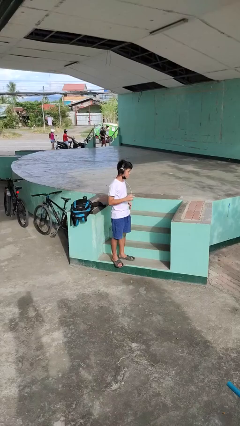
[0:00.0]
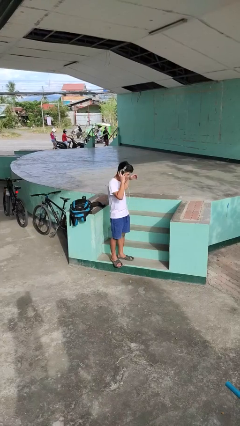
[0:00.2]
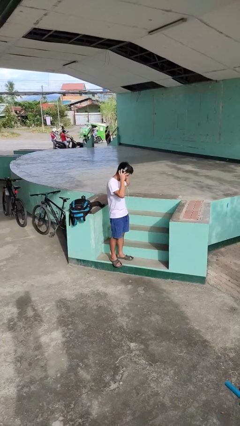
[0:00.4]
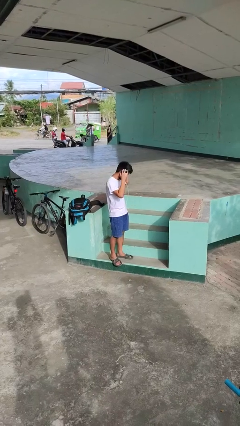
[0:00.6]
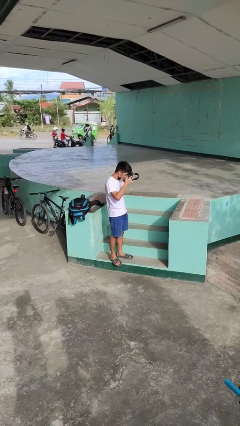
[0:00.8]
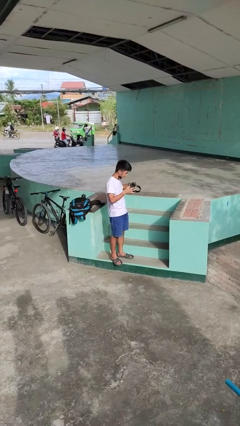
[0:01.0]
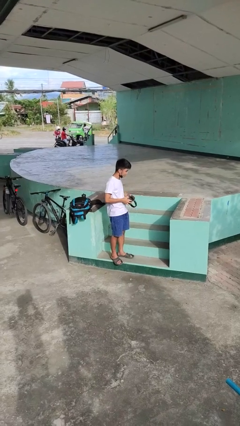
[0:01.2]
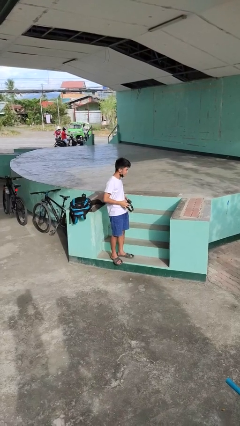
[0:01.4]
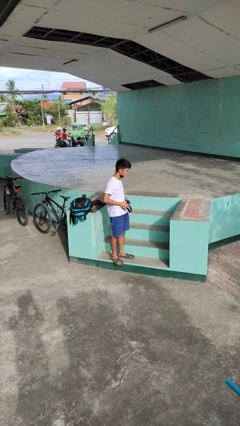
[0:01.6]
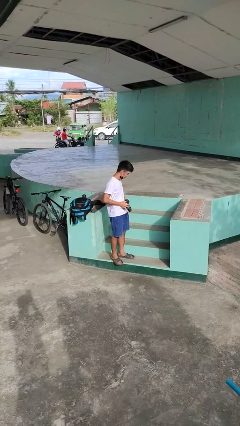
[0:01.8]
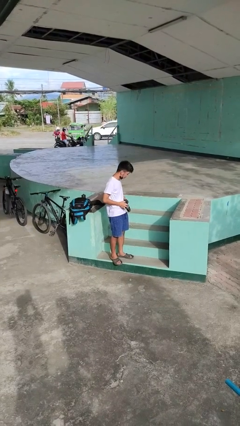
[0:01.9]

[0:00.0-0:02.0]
person takes off headphones

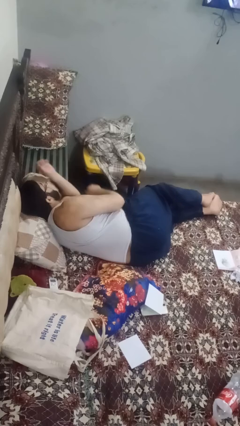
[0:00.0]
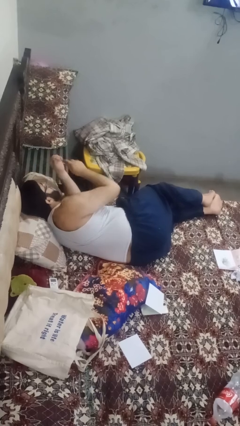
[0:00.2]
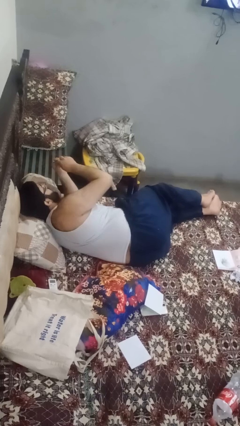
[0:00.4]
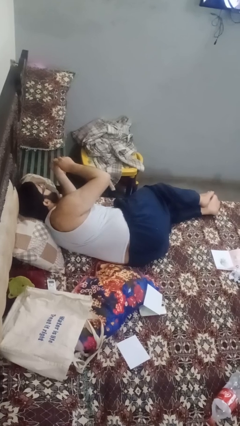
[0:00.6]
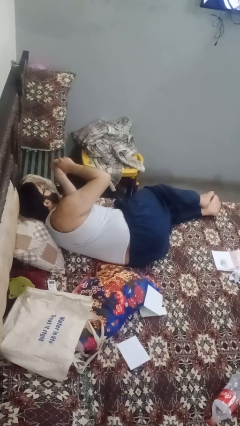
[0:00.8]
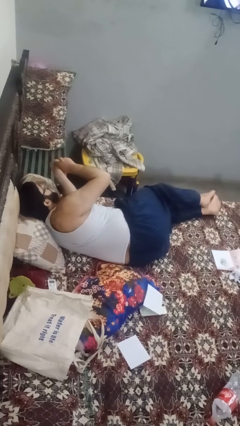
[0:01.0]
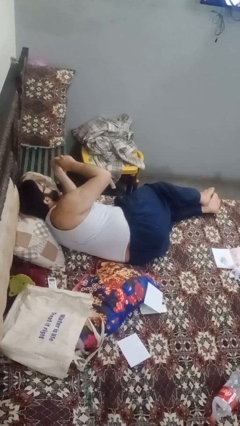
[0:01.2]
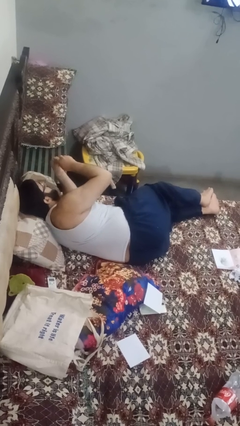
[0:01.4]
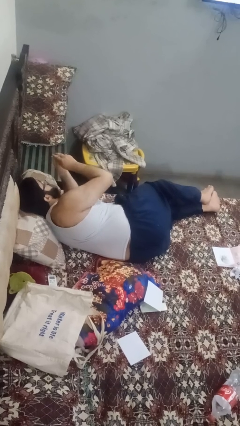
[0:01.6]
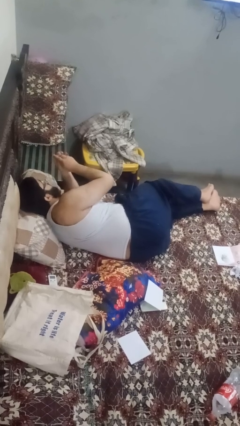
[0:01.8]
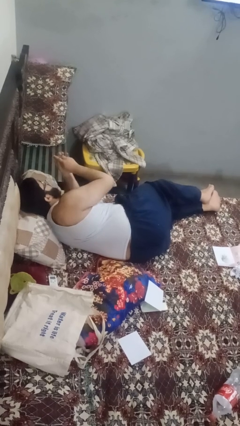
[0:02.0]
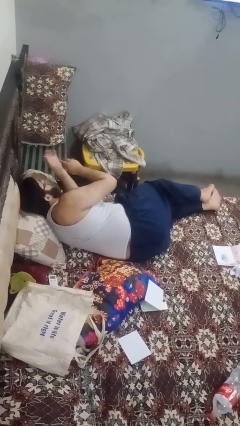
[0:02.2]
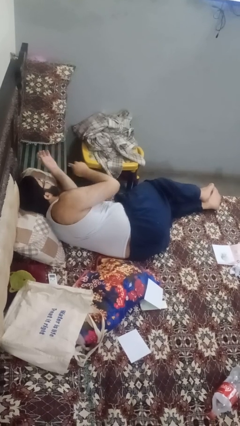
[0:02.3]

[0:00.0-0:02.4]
person files fingernails

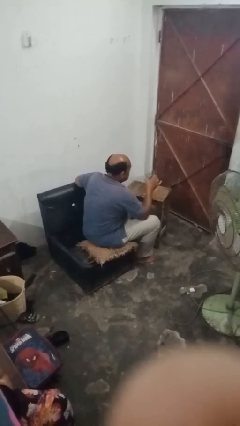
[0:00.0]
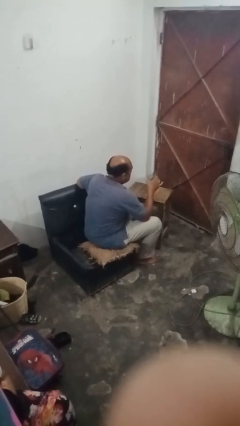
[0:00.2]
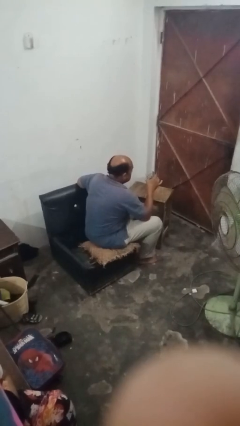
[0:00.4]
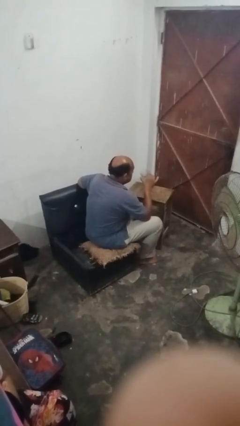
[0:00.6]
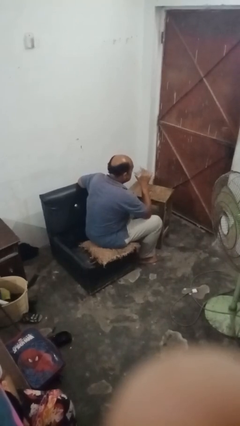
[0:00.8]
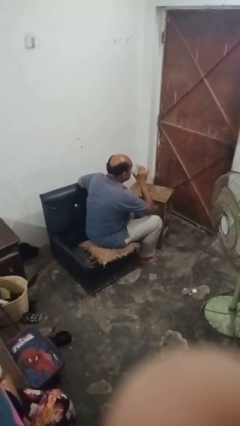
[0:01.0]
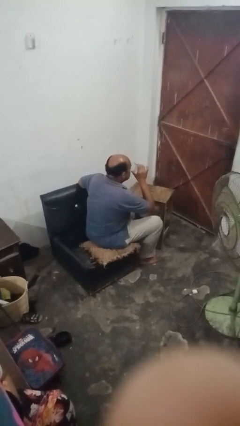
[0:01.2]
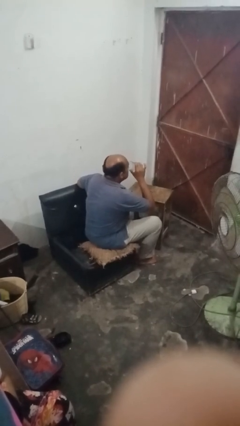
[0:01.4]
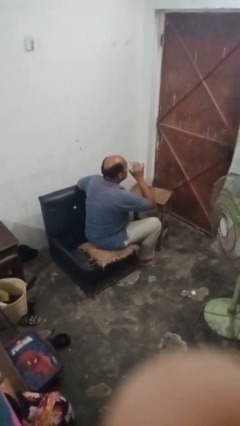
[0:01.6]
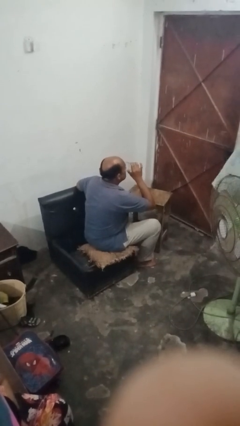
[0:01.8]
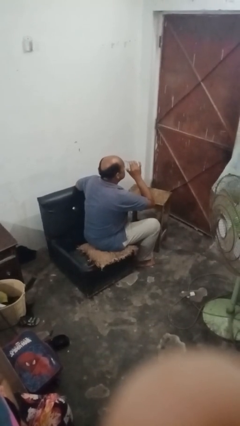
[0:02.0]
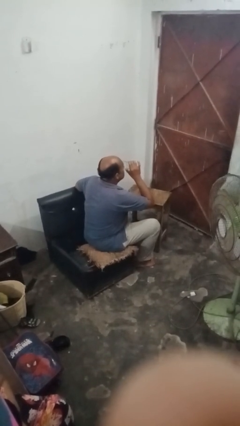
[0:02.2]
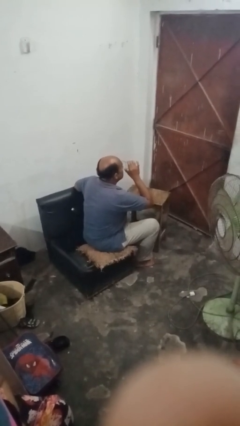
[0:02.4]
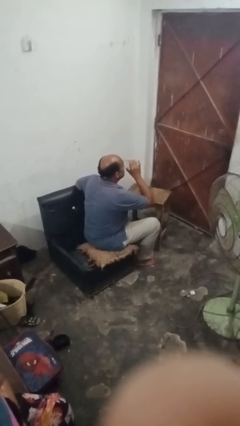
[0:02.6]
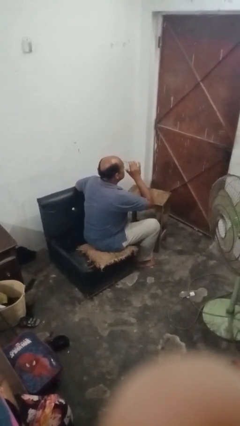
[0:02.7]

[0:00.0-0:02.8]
person drinks from shotglass

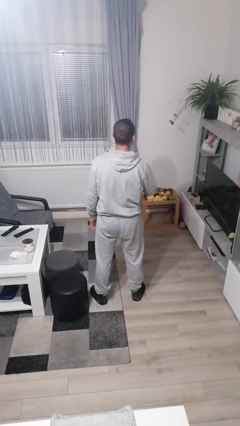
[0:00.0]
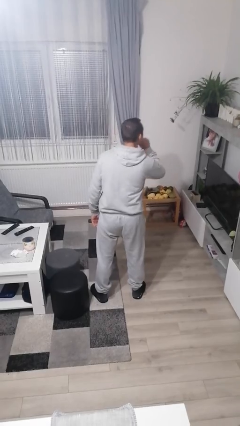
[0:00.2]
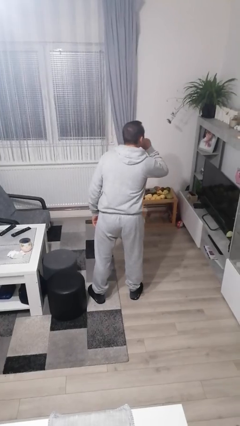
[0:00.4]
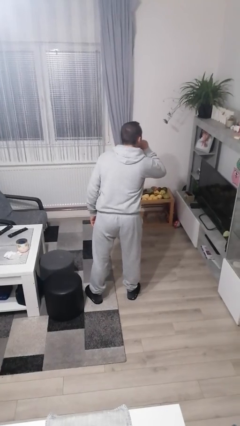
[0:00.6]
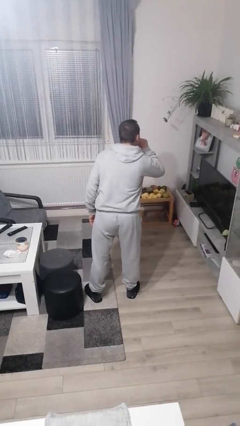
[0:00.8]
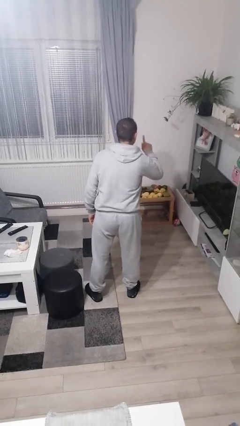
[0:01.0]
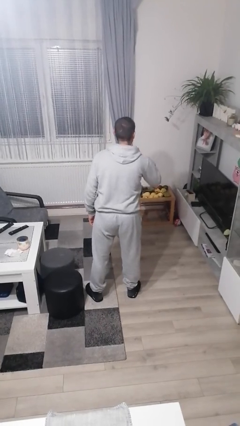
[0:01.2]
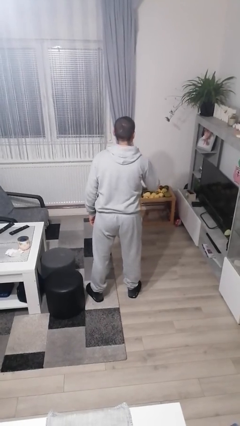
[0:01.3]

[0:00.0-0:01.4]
person gestures be quiet

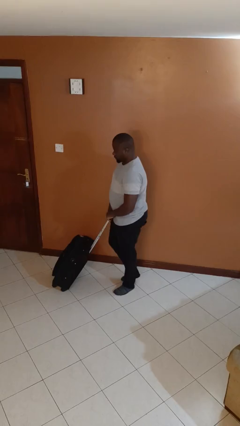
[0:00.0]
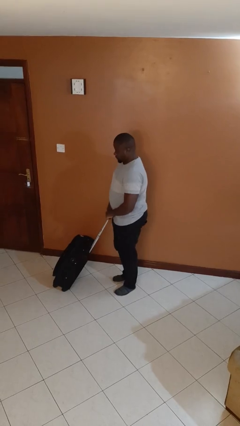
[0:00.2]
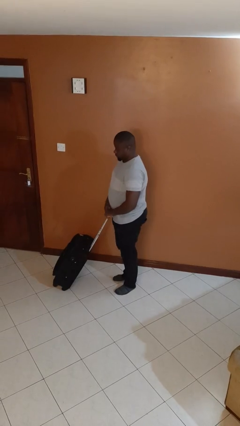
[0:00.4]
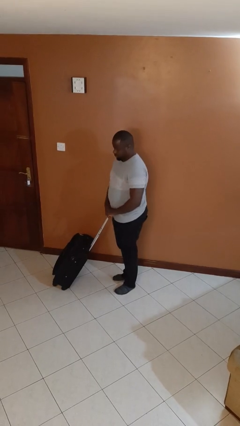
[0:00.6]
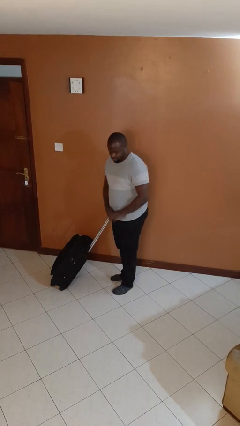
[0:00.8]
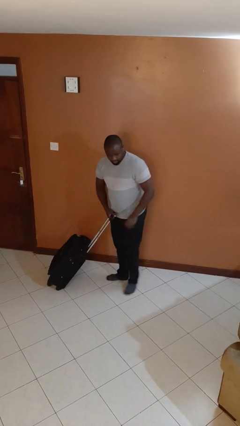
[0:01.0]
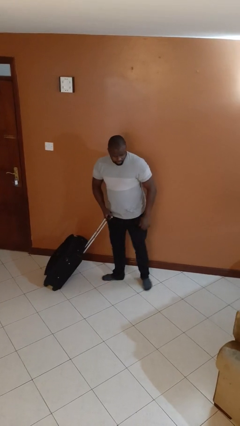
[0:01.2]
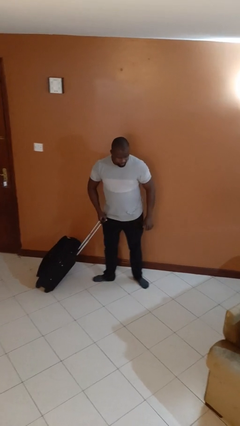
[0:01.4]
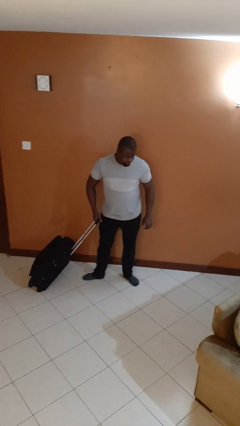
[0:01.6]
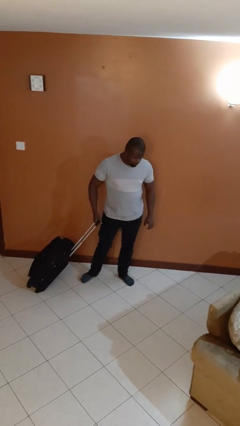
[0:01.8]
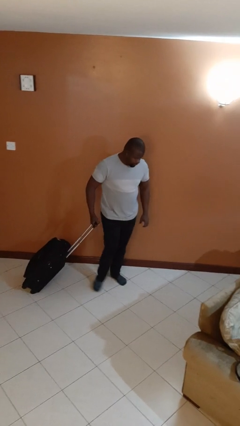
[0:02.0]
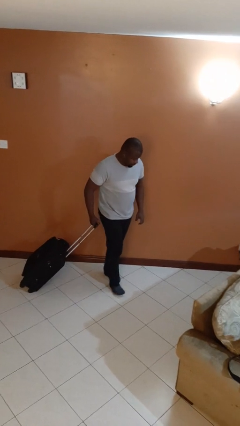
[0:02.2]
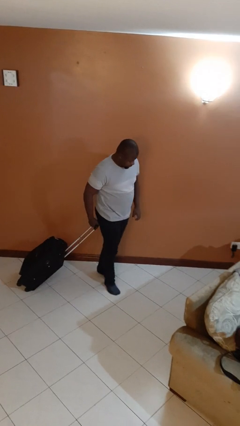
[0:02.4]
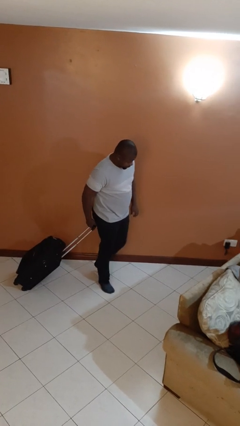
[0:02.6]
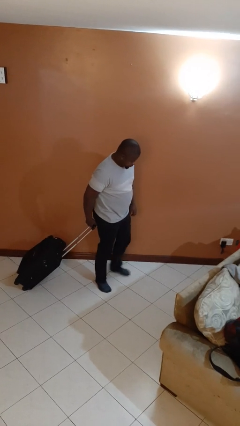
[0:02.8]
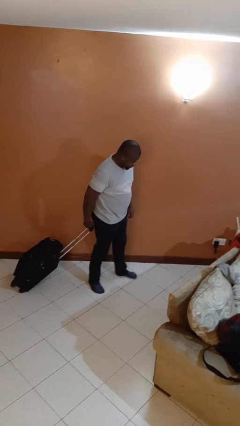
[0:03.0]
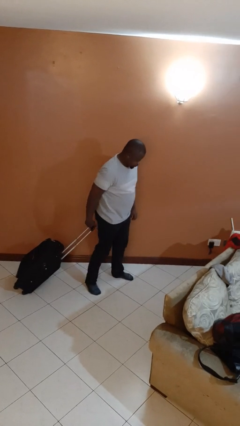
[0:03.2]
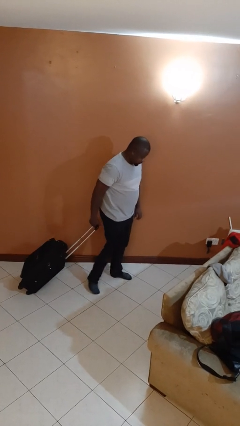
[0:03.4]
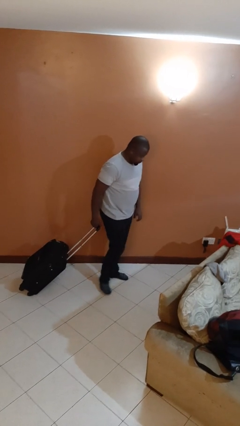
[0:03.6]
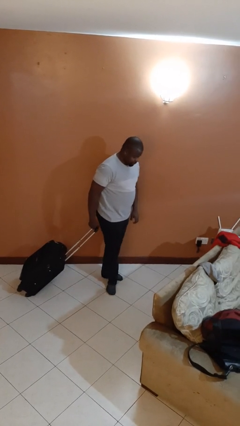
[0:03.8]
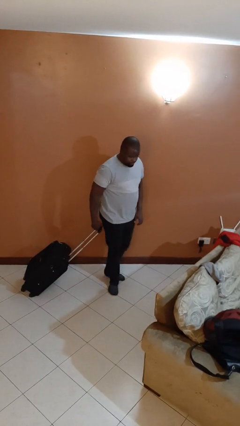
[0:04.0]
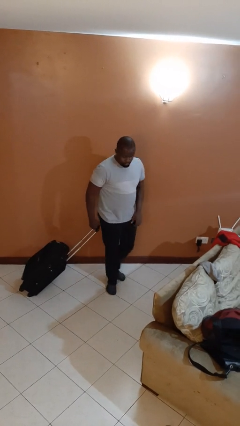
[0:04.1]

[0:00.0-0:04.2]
person pulls wheeled cart

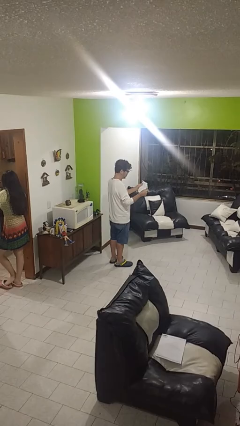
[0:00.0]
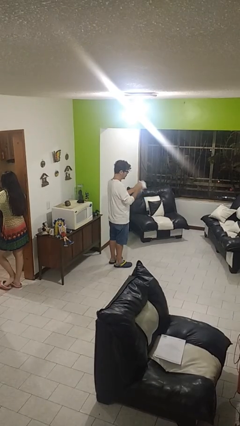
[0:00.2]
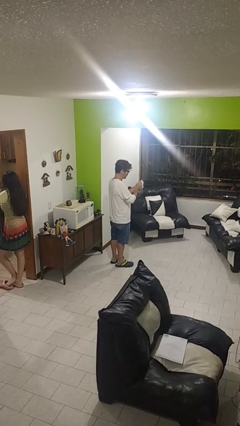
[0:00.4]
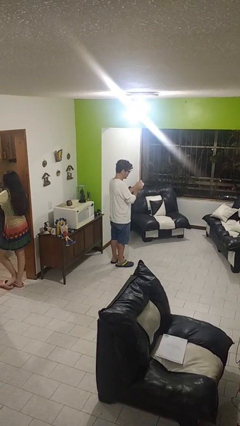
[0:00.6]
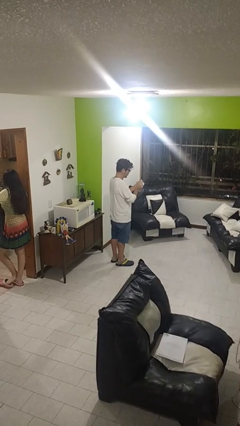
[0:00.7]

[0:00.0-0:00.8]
person crumples paper

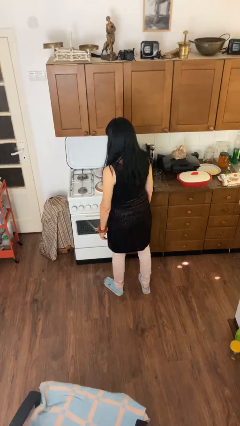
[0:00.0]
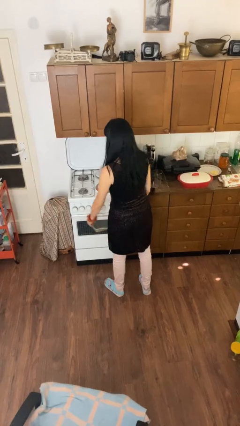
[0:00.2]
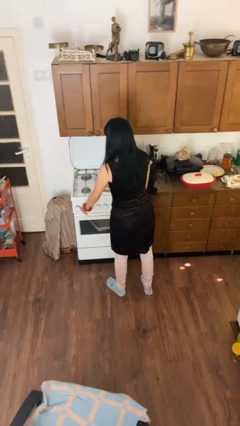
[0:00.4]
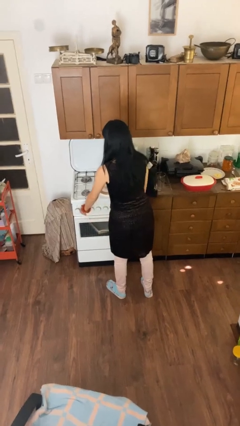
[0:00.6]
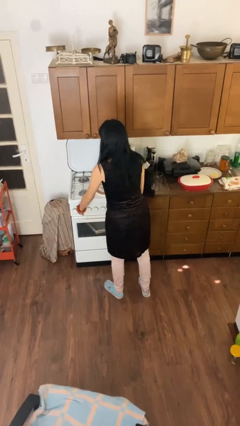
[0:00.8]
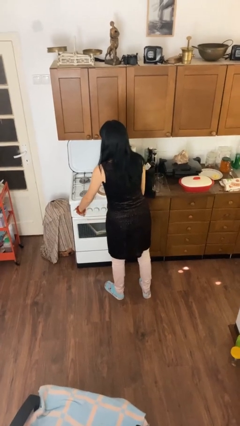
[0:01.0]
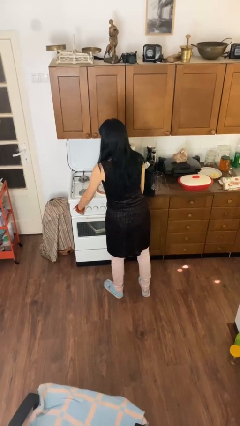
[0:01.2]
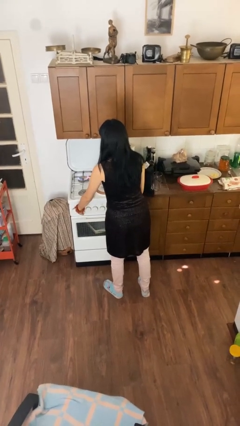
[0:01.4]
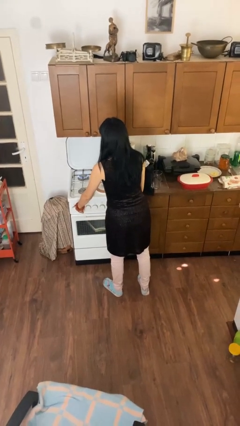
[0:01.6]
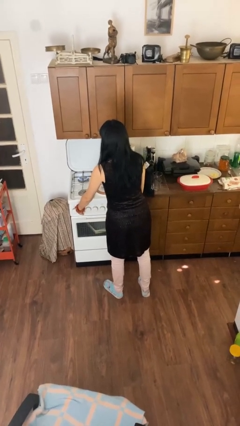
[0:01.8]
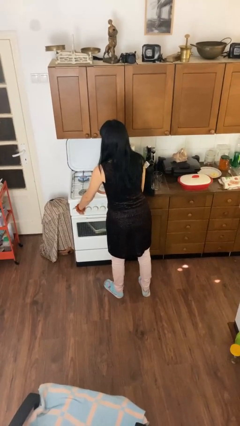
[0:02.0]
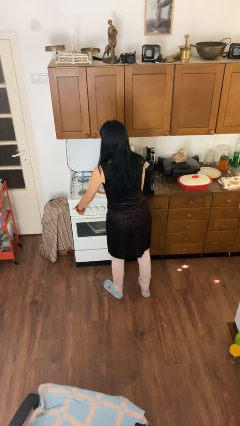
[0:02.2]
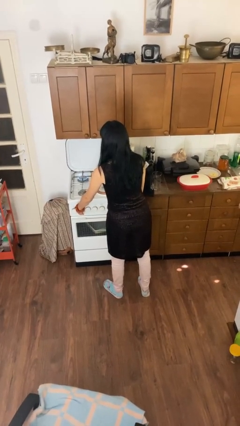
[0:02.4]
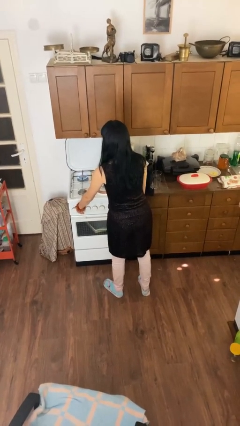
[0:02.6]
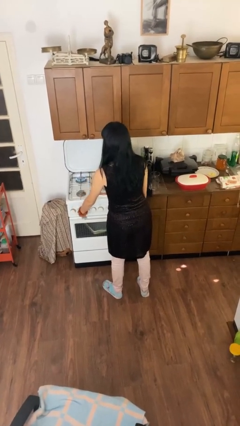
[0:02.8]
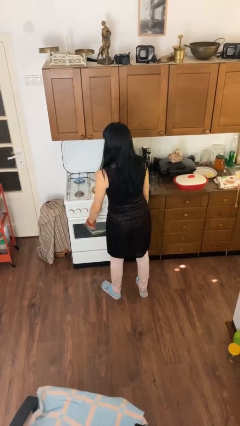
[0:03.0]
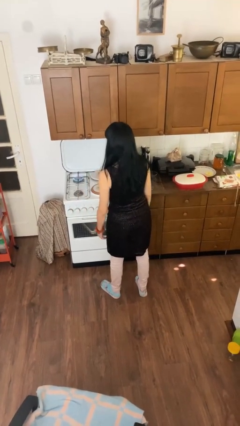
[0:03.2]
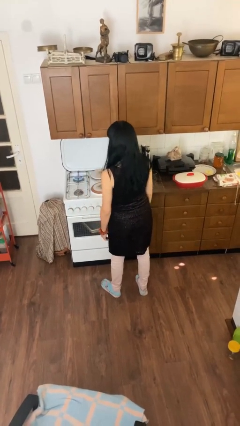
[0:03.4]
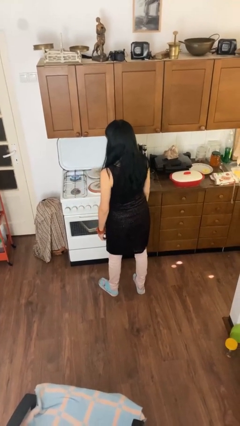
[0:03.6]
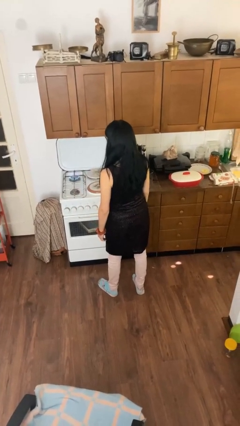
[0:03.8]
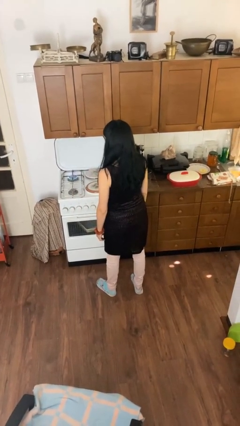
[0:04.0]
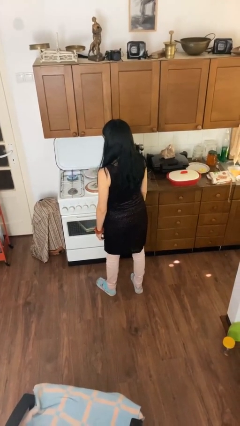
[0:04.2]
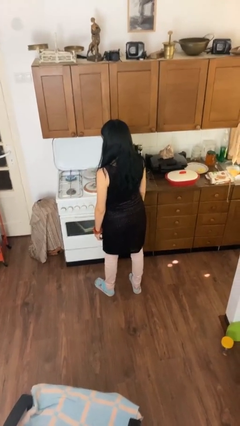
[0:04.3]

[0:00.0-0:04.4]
person turns on stovetop
